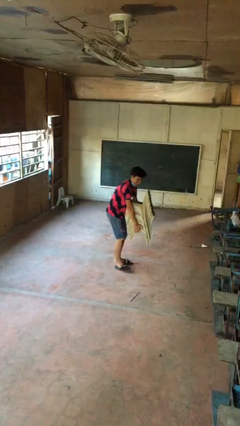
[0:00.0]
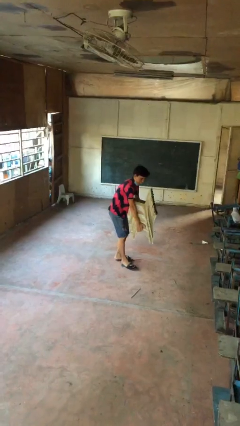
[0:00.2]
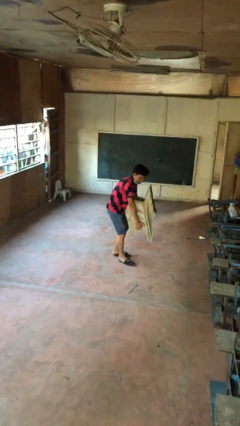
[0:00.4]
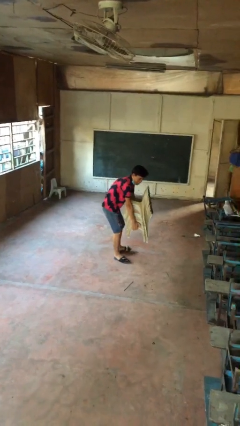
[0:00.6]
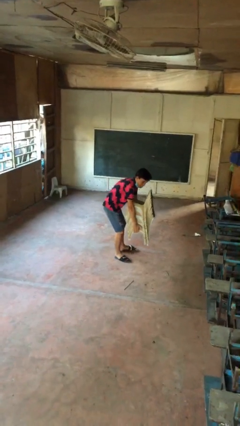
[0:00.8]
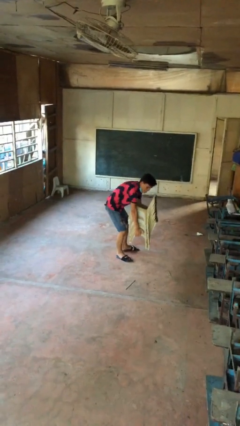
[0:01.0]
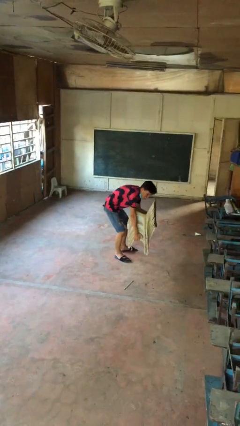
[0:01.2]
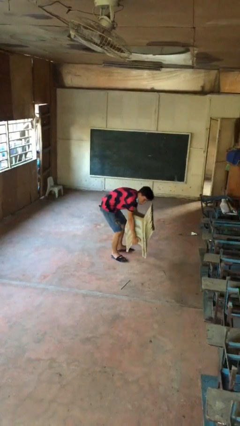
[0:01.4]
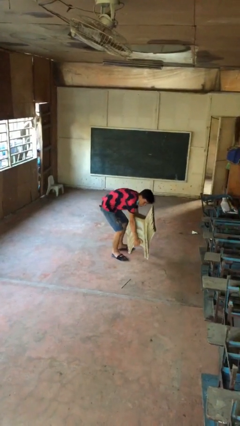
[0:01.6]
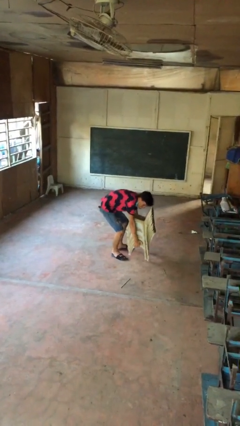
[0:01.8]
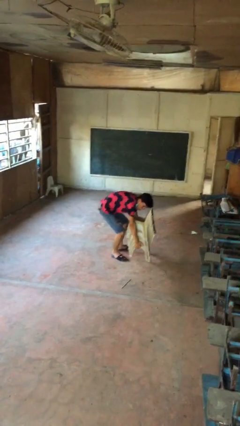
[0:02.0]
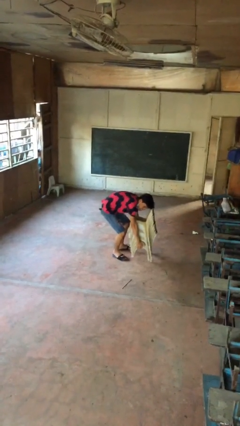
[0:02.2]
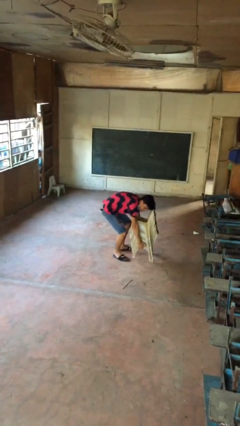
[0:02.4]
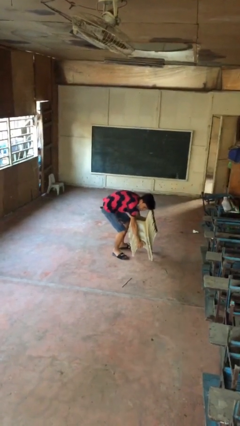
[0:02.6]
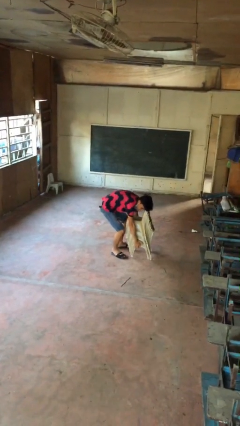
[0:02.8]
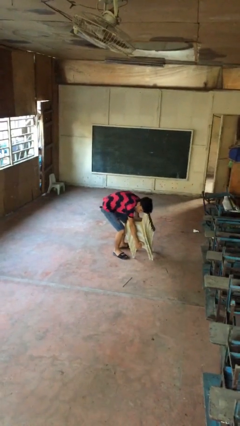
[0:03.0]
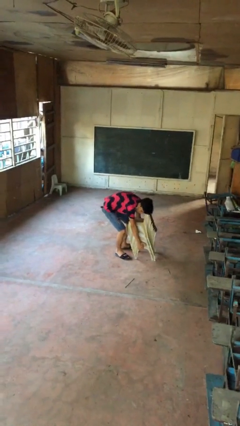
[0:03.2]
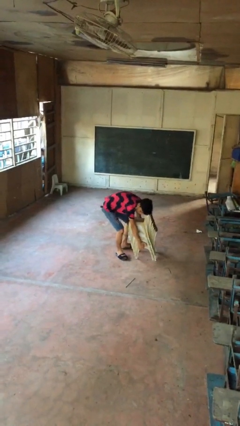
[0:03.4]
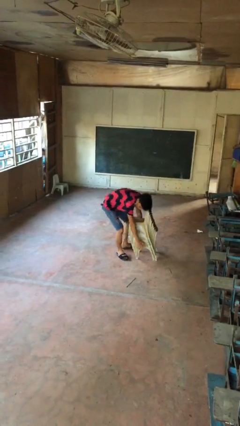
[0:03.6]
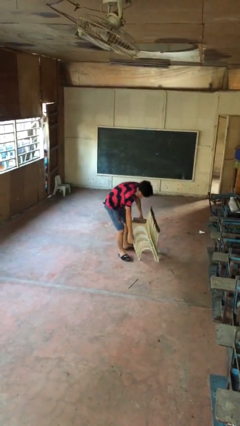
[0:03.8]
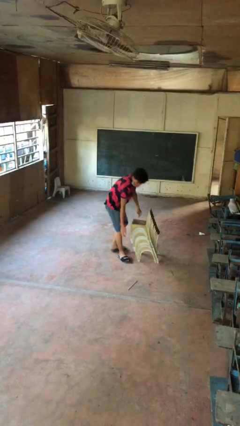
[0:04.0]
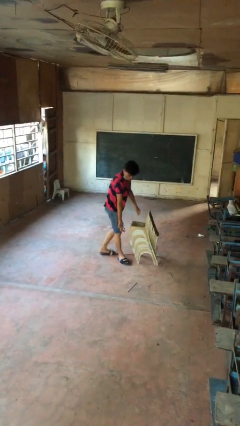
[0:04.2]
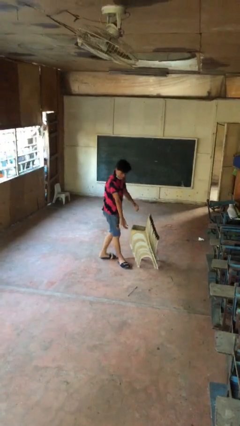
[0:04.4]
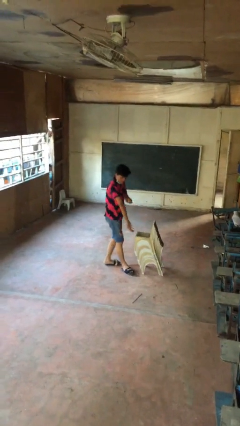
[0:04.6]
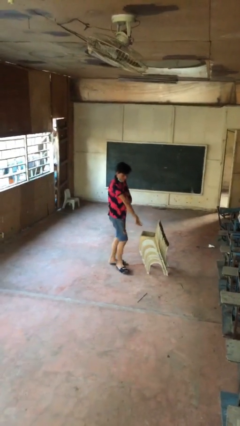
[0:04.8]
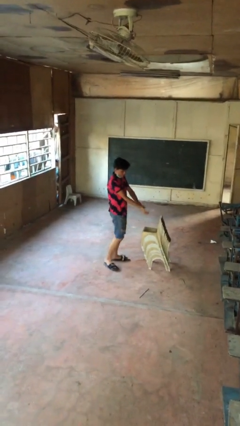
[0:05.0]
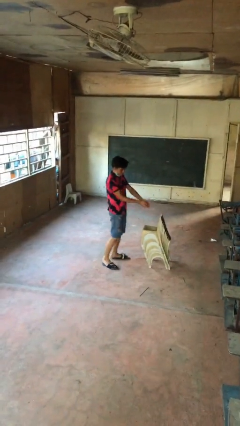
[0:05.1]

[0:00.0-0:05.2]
person puts down object on floor

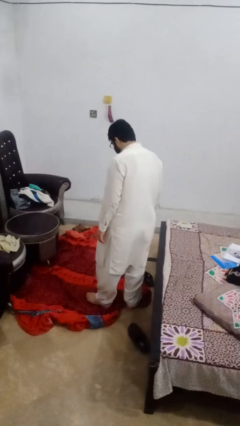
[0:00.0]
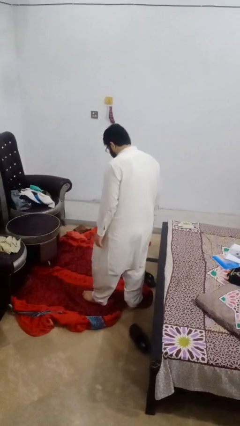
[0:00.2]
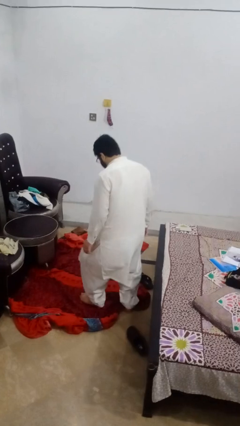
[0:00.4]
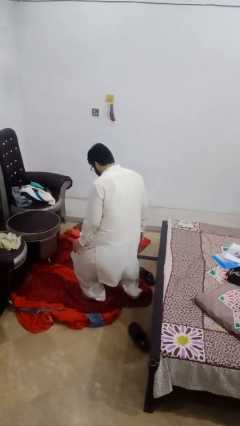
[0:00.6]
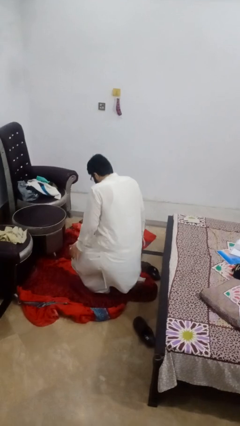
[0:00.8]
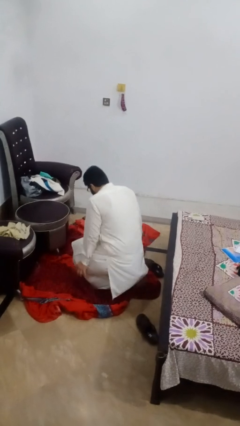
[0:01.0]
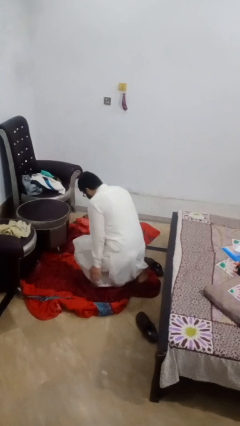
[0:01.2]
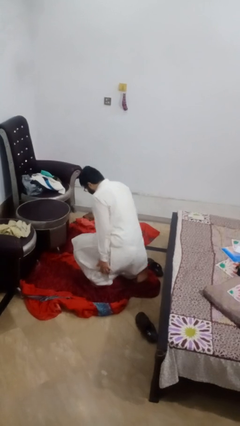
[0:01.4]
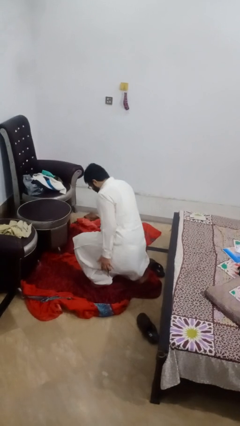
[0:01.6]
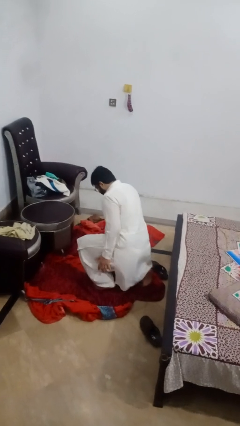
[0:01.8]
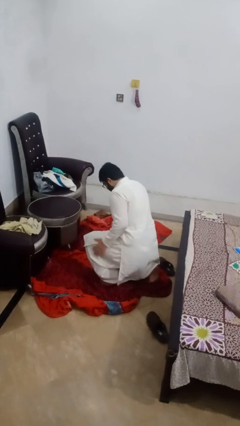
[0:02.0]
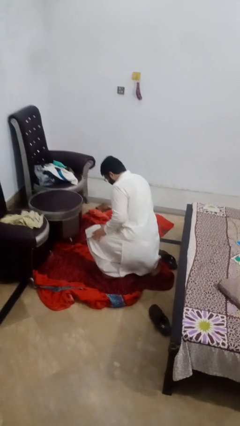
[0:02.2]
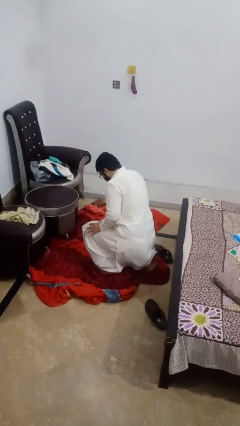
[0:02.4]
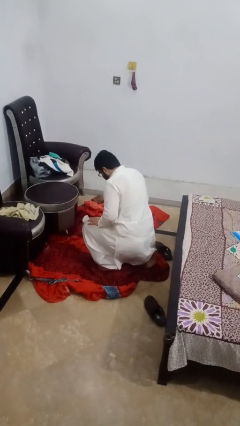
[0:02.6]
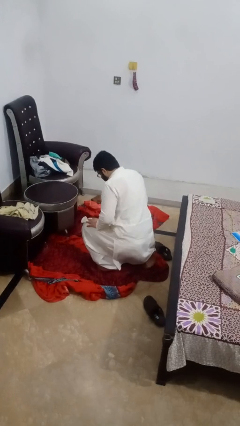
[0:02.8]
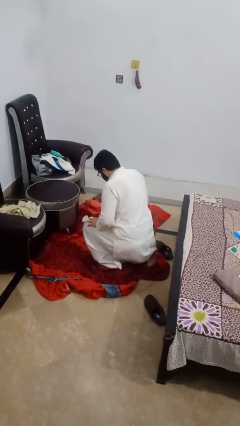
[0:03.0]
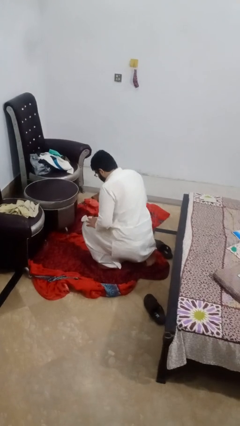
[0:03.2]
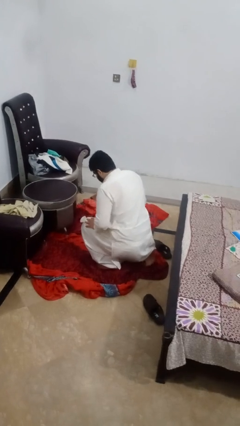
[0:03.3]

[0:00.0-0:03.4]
person kneels

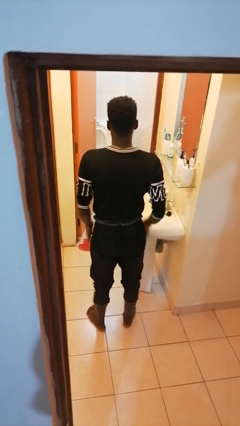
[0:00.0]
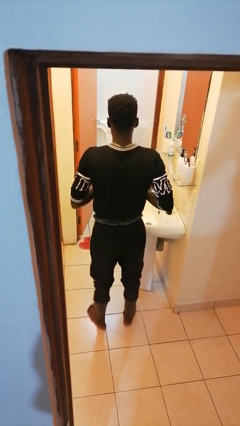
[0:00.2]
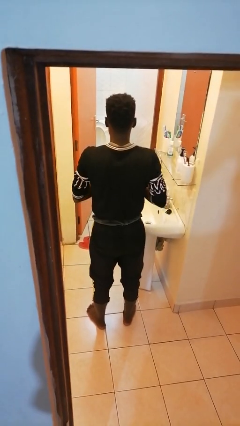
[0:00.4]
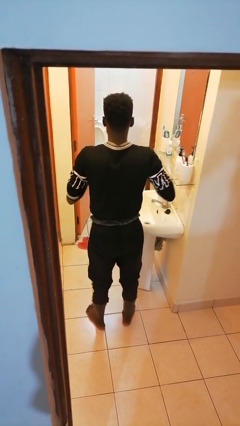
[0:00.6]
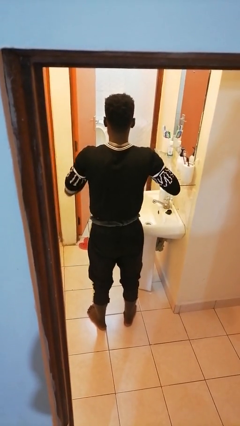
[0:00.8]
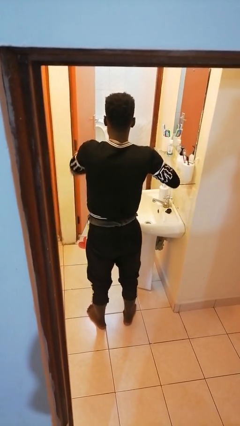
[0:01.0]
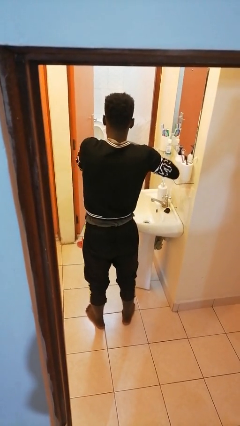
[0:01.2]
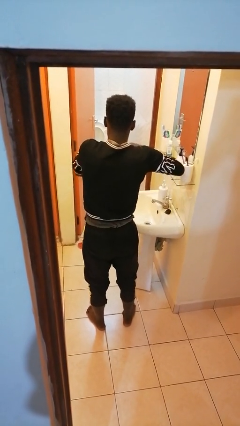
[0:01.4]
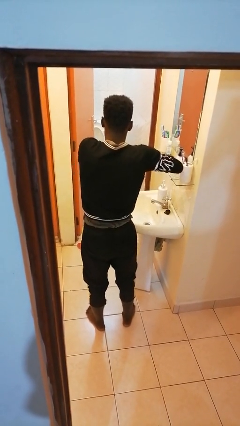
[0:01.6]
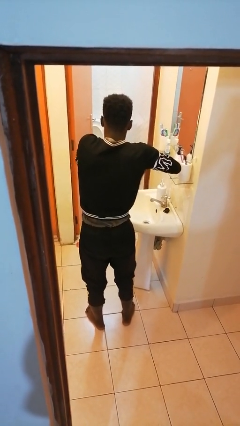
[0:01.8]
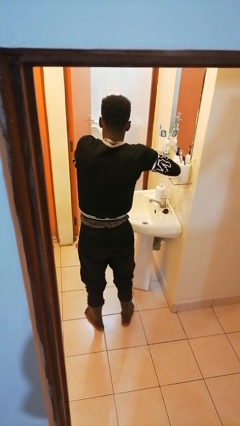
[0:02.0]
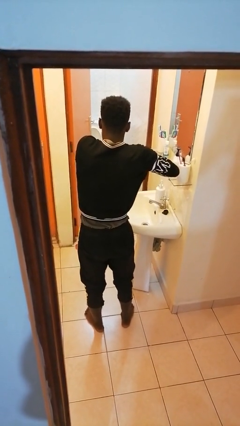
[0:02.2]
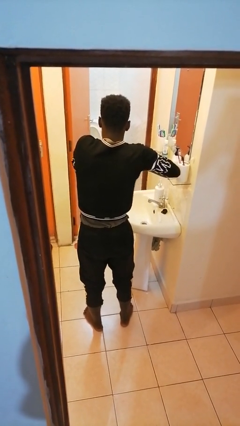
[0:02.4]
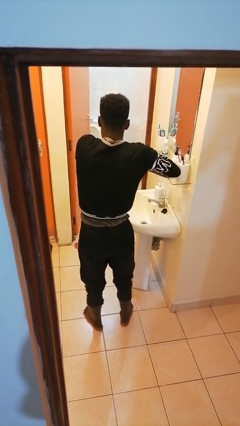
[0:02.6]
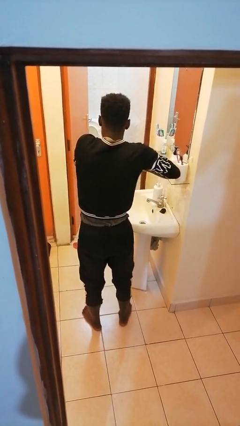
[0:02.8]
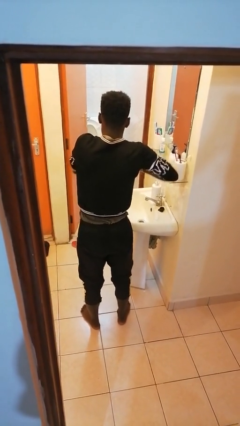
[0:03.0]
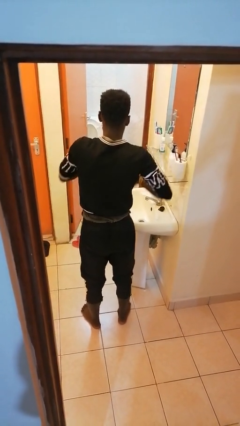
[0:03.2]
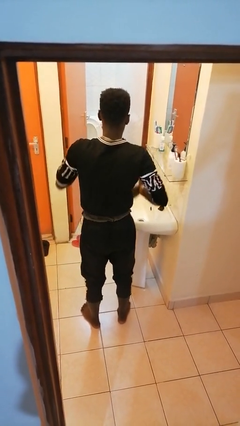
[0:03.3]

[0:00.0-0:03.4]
person applies deodorant

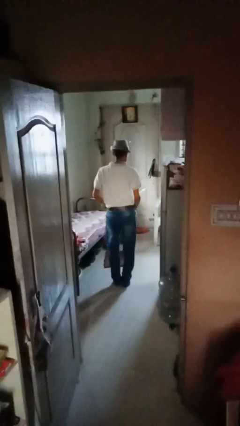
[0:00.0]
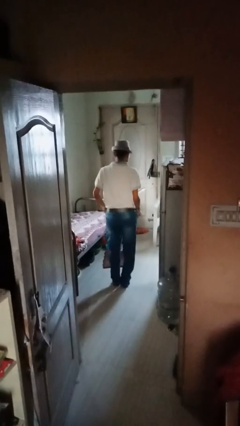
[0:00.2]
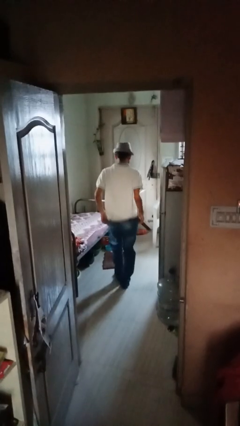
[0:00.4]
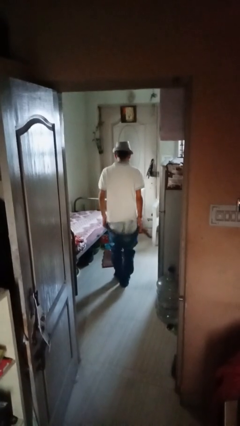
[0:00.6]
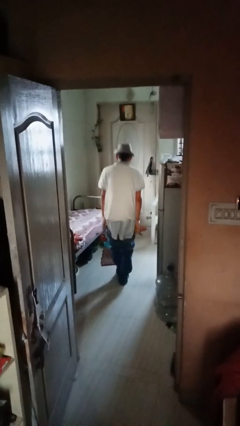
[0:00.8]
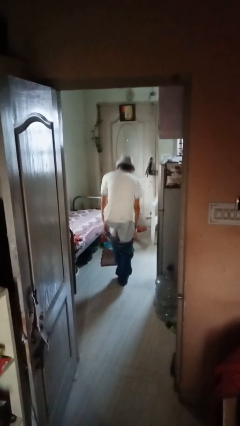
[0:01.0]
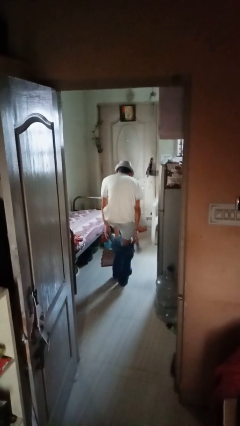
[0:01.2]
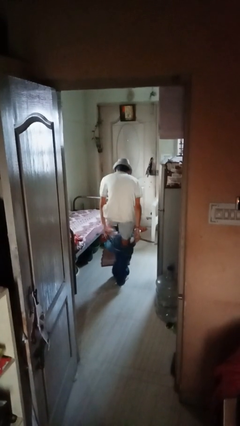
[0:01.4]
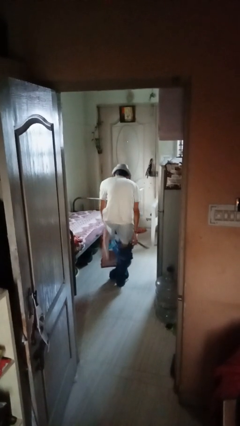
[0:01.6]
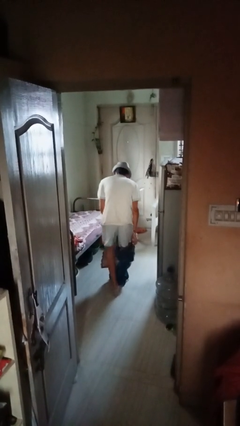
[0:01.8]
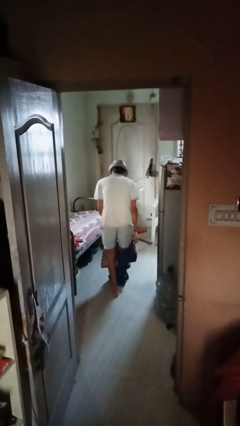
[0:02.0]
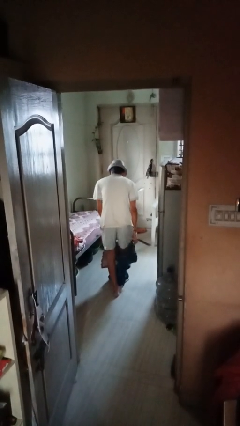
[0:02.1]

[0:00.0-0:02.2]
person takes off pants

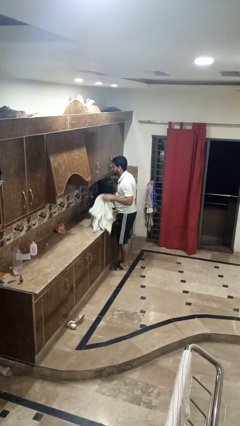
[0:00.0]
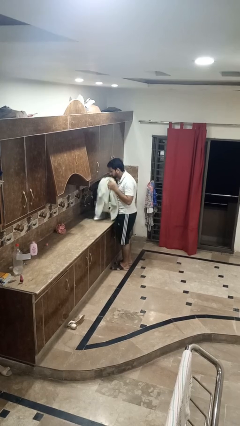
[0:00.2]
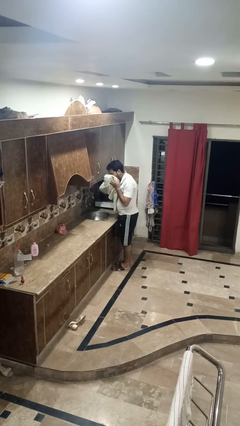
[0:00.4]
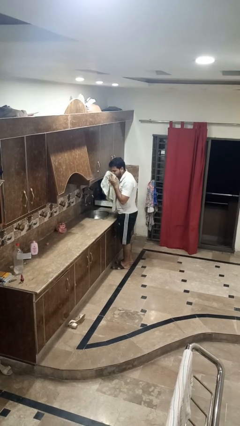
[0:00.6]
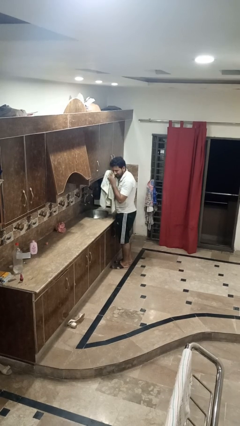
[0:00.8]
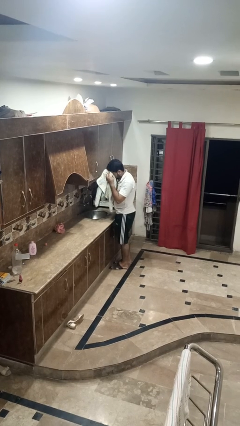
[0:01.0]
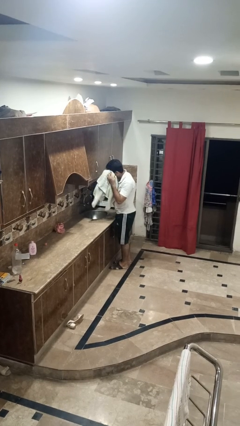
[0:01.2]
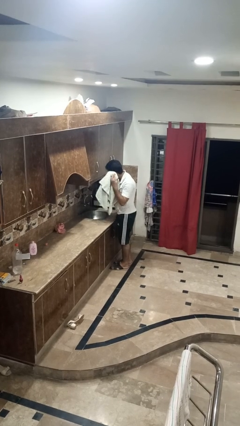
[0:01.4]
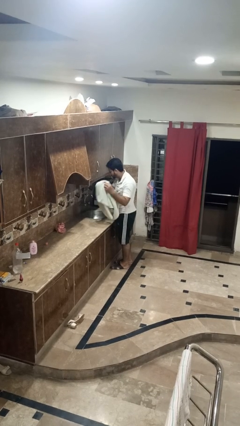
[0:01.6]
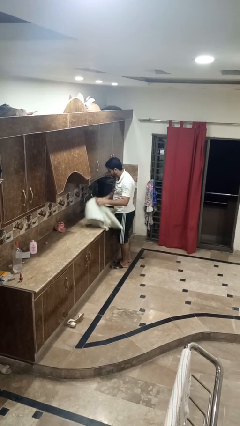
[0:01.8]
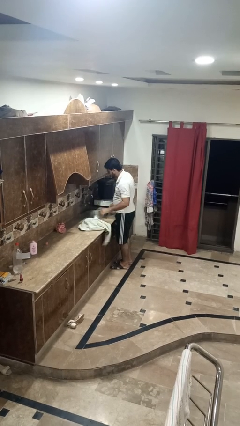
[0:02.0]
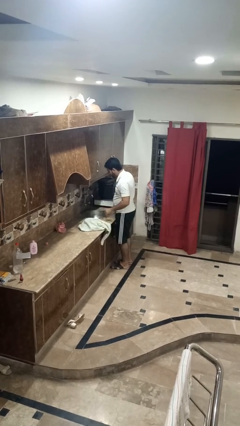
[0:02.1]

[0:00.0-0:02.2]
person dries face with towel

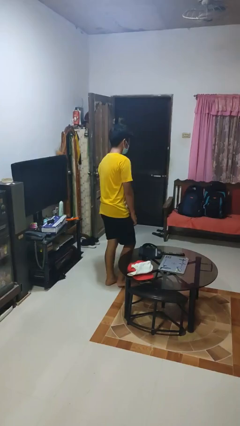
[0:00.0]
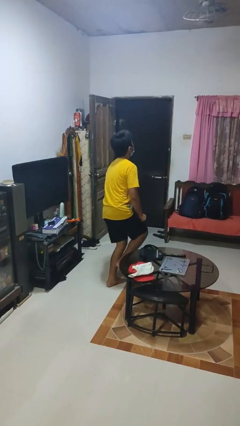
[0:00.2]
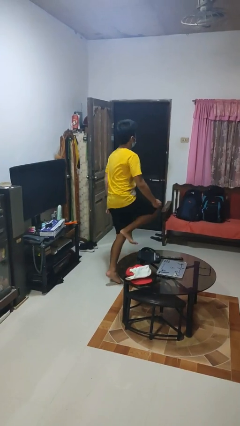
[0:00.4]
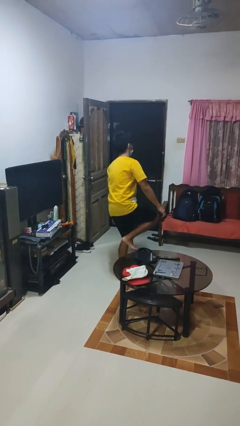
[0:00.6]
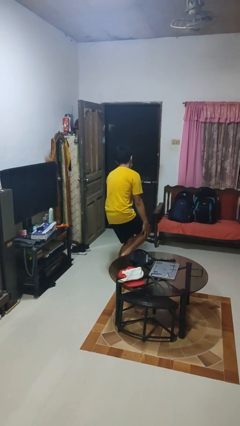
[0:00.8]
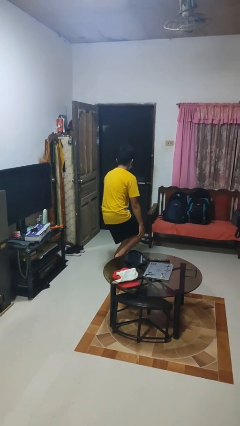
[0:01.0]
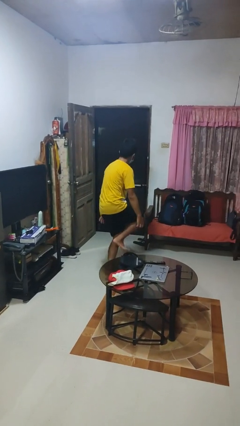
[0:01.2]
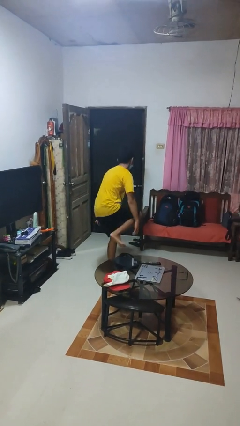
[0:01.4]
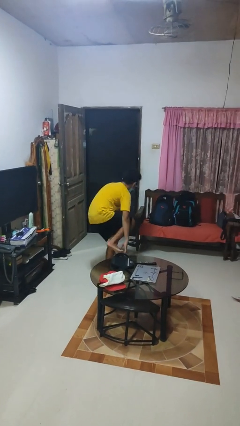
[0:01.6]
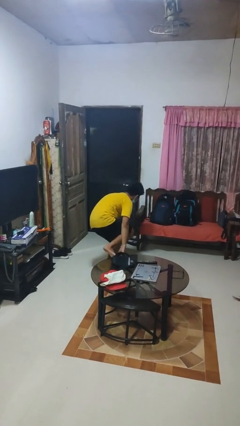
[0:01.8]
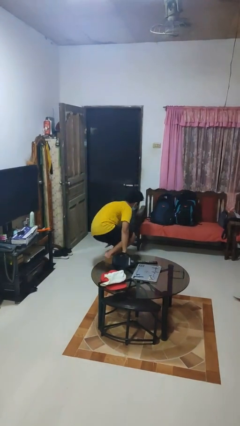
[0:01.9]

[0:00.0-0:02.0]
person trips on object on floor
